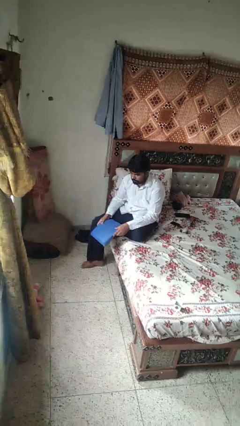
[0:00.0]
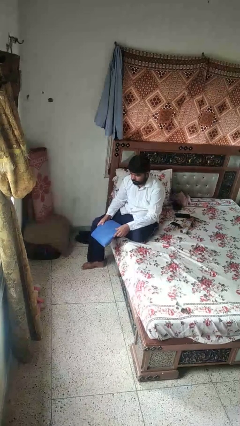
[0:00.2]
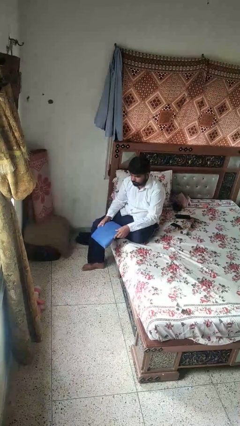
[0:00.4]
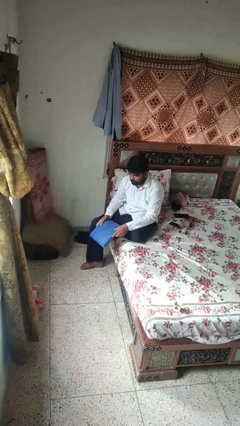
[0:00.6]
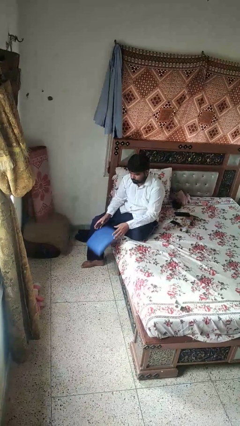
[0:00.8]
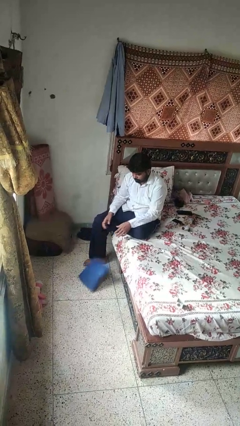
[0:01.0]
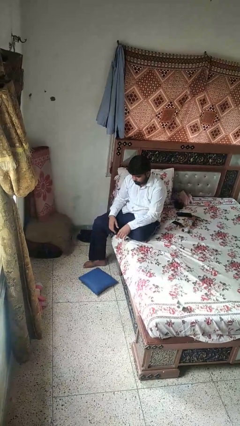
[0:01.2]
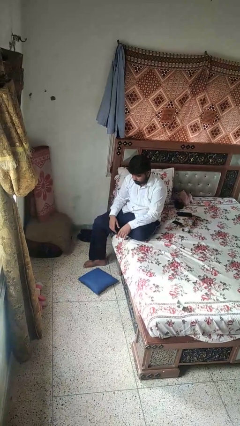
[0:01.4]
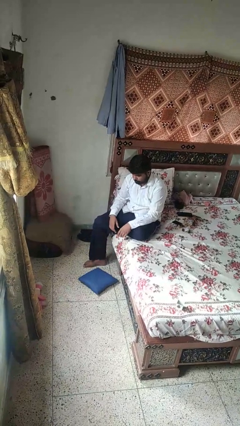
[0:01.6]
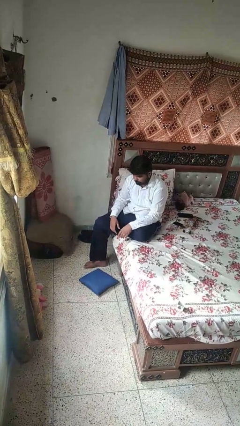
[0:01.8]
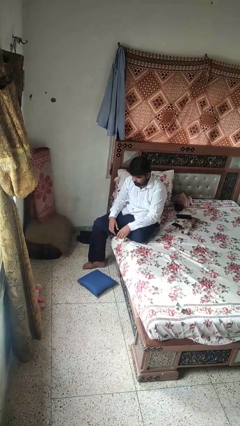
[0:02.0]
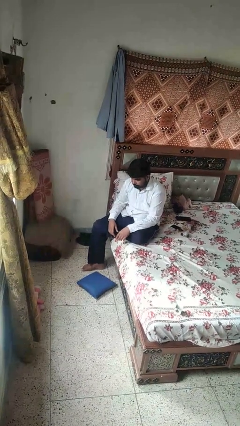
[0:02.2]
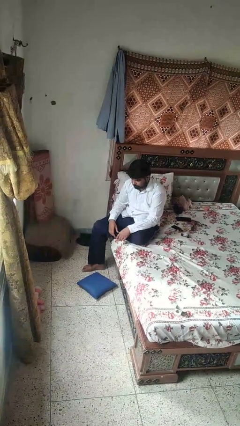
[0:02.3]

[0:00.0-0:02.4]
person drops object

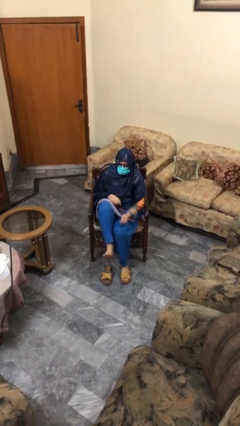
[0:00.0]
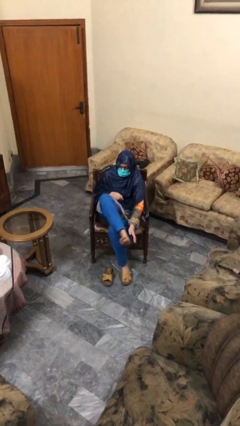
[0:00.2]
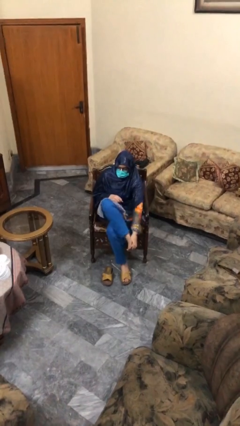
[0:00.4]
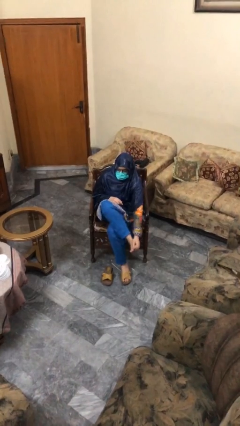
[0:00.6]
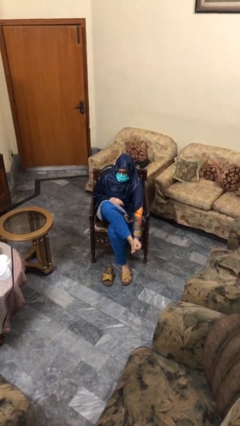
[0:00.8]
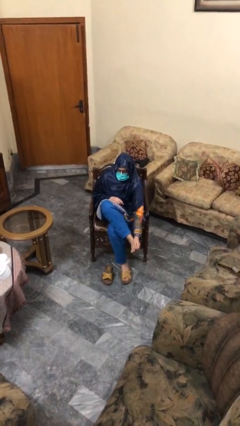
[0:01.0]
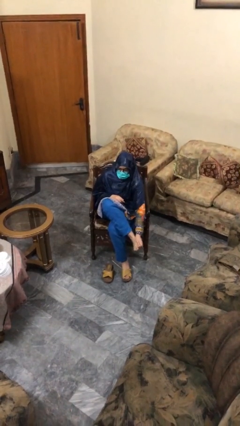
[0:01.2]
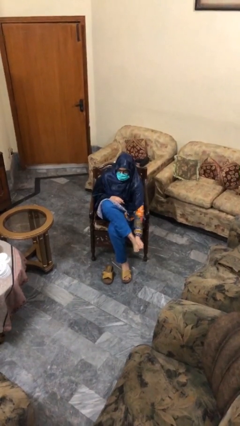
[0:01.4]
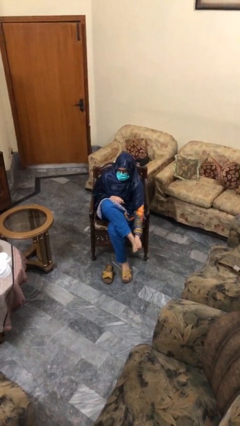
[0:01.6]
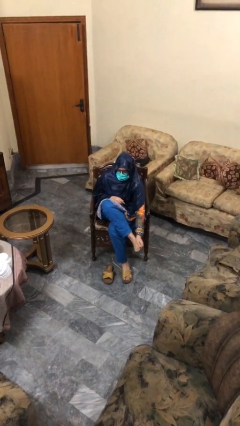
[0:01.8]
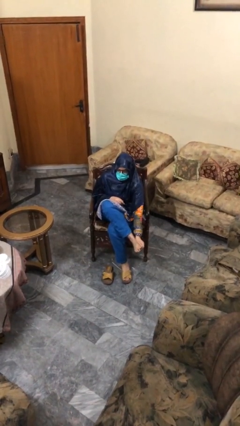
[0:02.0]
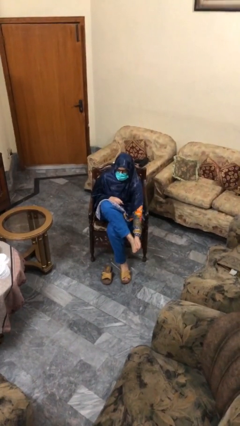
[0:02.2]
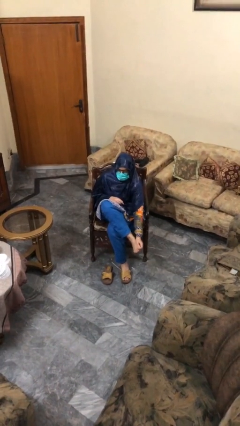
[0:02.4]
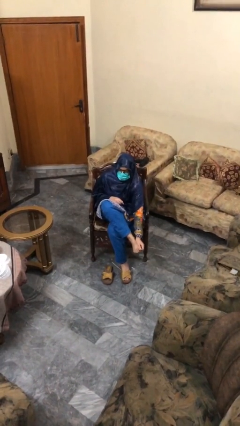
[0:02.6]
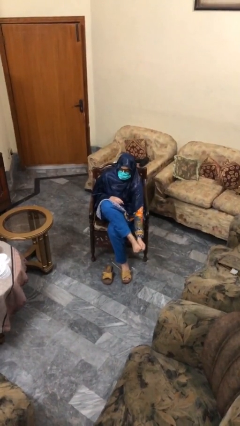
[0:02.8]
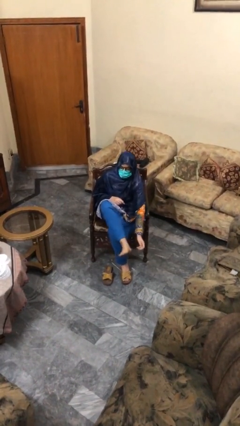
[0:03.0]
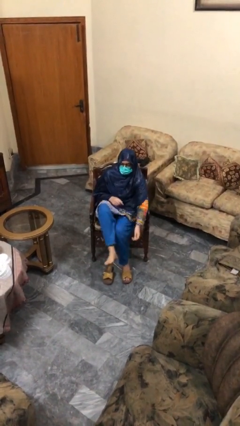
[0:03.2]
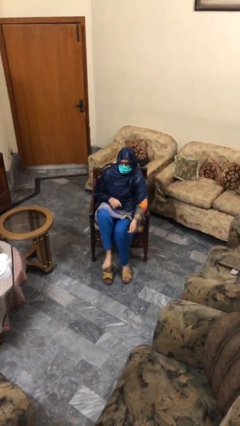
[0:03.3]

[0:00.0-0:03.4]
person rubs foot

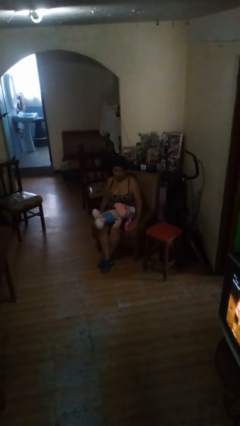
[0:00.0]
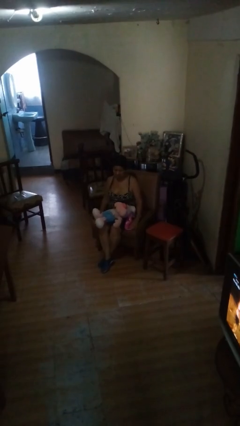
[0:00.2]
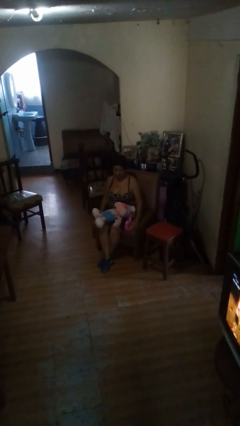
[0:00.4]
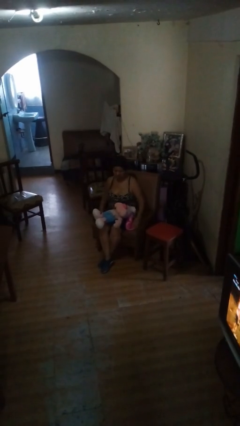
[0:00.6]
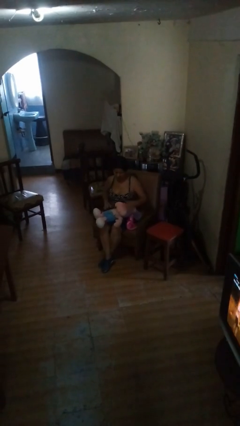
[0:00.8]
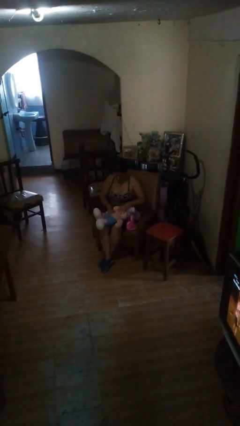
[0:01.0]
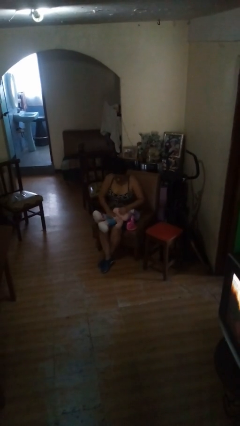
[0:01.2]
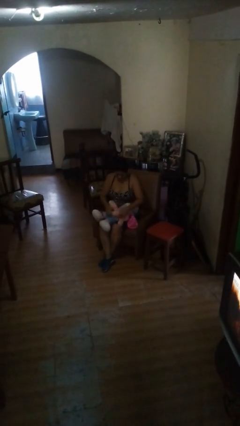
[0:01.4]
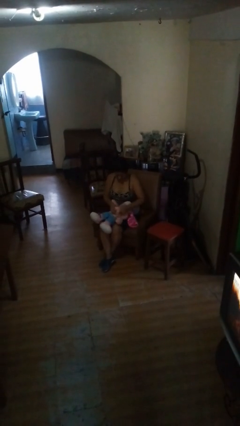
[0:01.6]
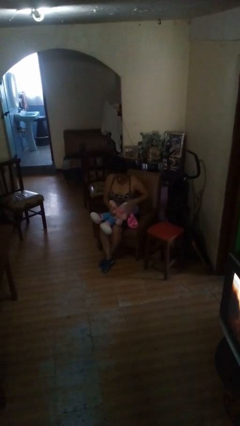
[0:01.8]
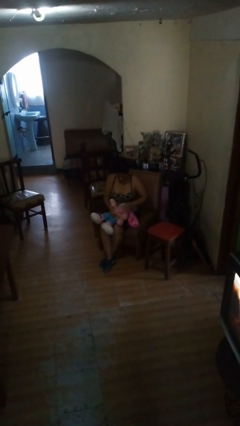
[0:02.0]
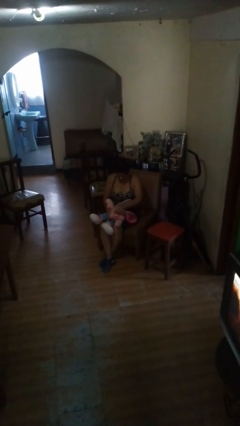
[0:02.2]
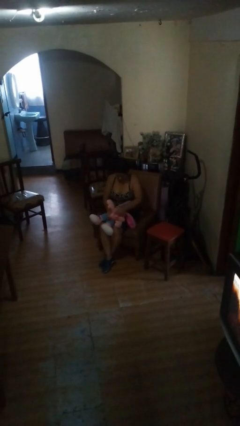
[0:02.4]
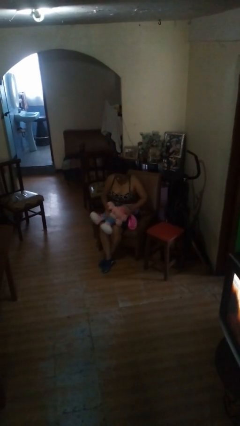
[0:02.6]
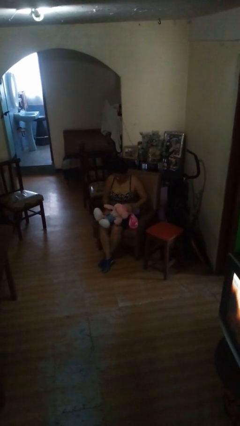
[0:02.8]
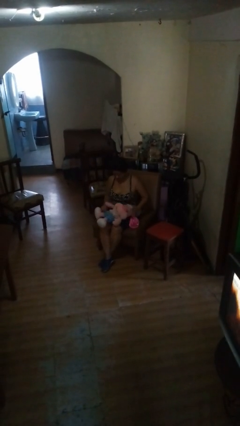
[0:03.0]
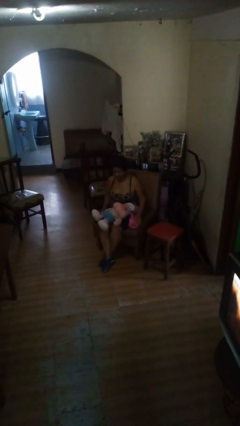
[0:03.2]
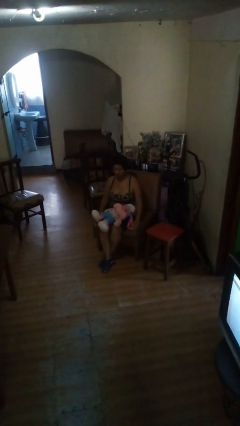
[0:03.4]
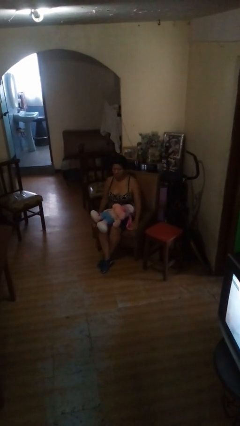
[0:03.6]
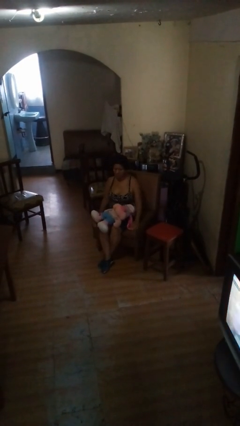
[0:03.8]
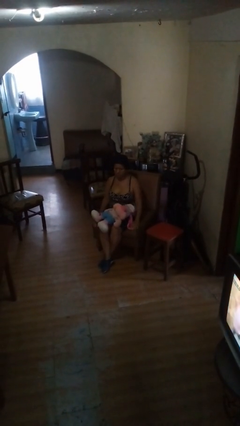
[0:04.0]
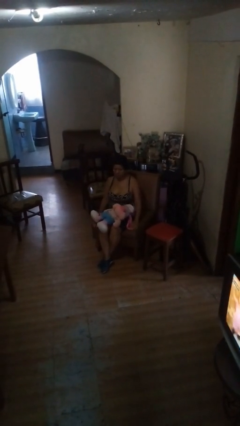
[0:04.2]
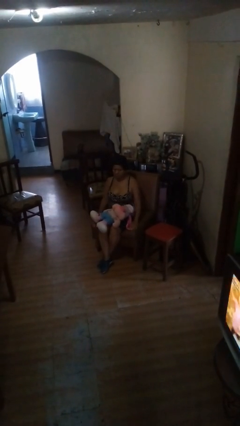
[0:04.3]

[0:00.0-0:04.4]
person squeezes object

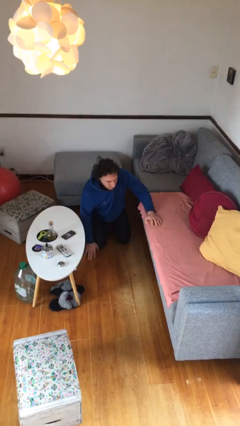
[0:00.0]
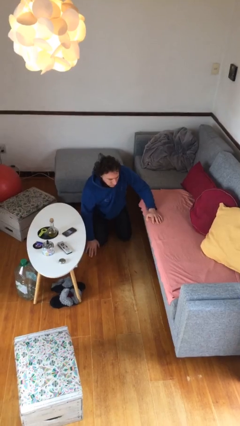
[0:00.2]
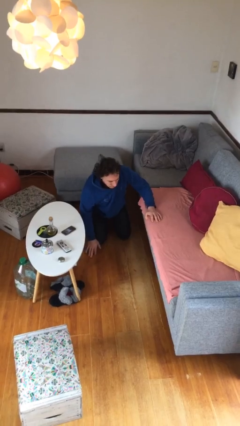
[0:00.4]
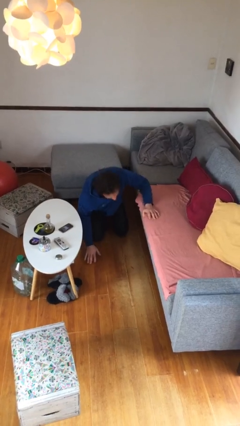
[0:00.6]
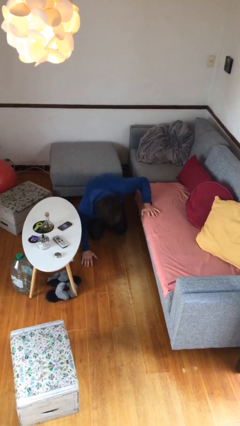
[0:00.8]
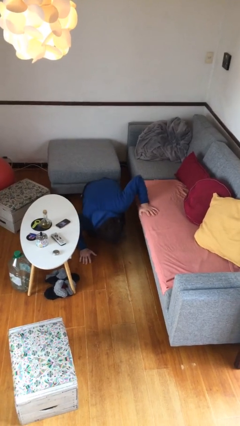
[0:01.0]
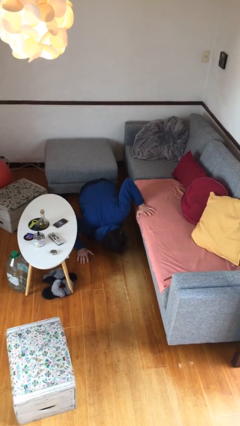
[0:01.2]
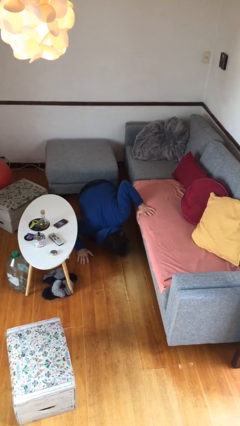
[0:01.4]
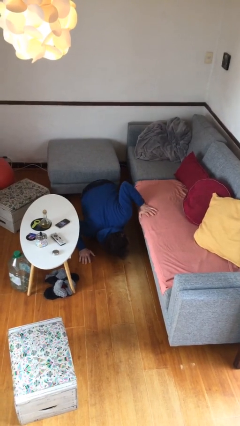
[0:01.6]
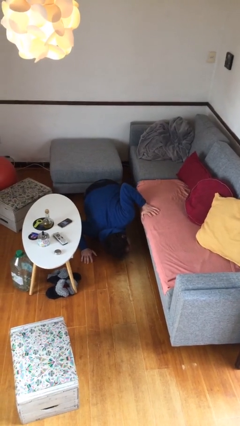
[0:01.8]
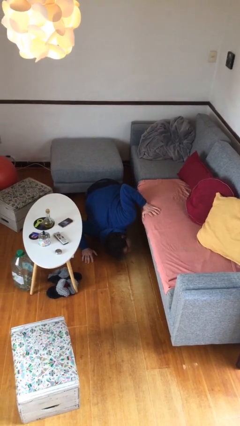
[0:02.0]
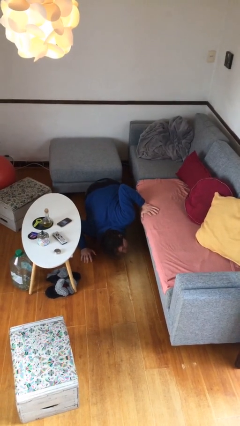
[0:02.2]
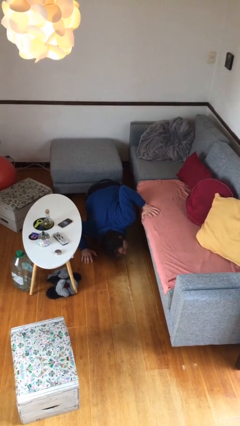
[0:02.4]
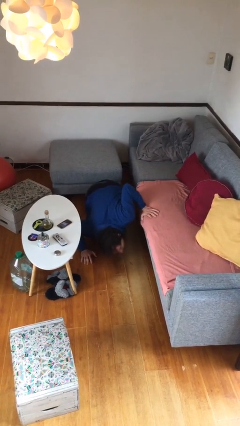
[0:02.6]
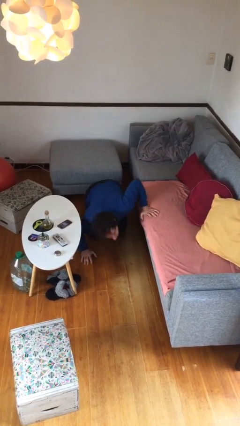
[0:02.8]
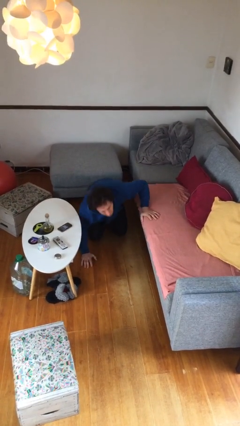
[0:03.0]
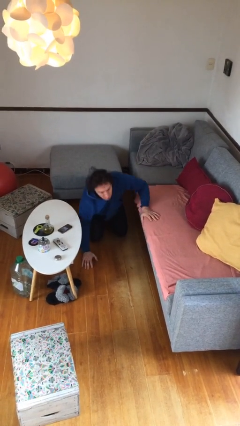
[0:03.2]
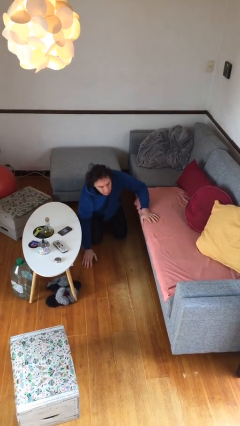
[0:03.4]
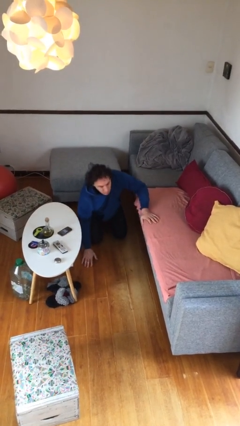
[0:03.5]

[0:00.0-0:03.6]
person searches under couch

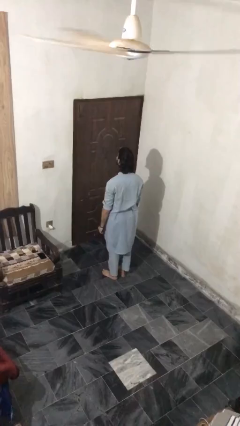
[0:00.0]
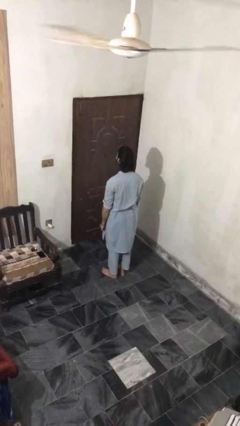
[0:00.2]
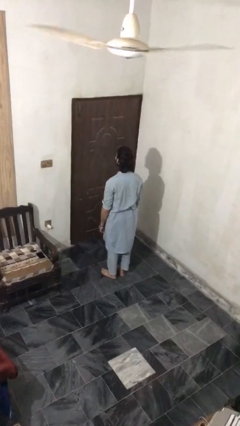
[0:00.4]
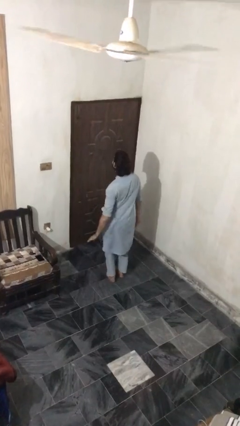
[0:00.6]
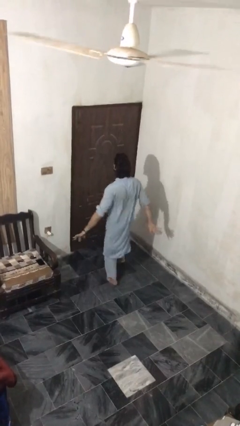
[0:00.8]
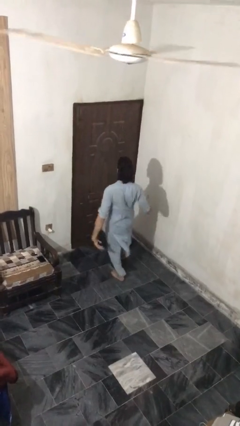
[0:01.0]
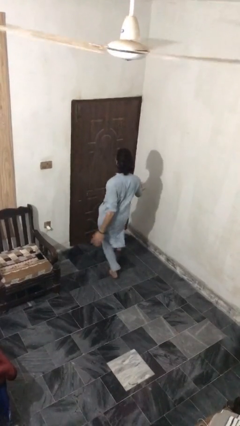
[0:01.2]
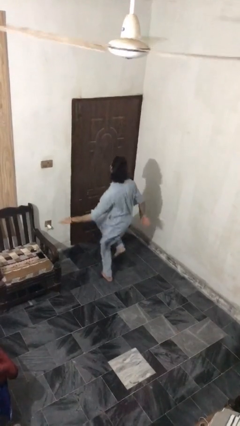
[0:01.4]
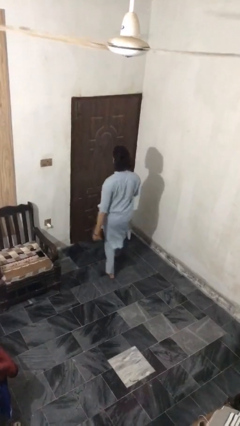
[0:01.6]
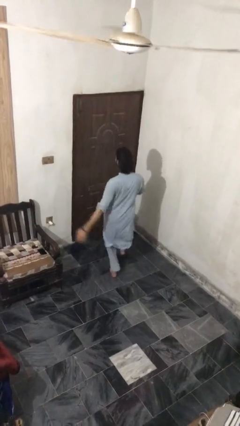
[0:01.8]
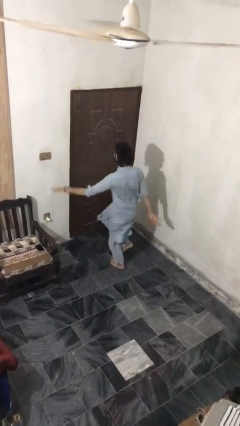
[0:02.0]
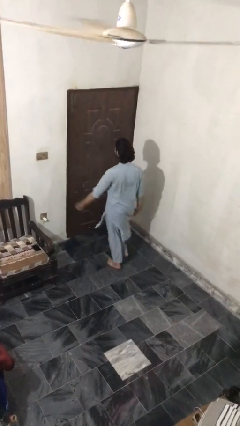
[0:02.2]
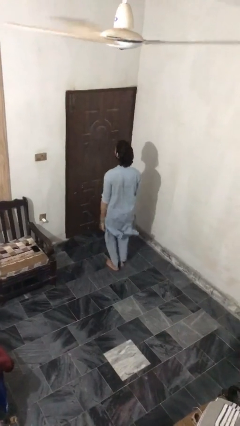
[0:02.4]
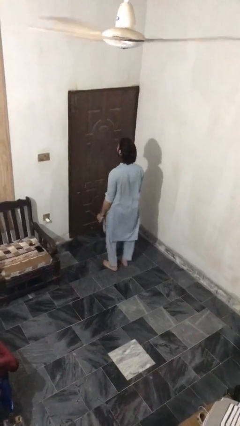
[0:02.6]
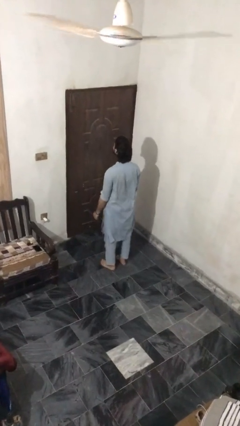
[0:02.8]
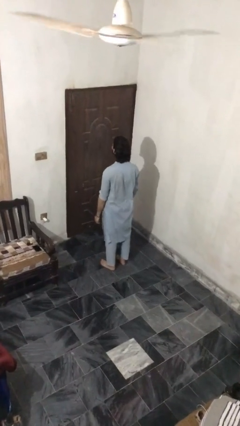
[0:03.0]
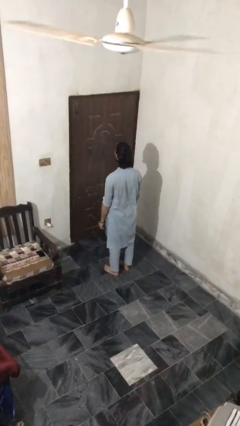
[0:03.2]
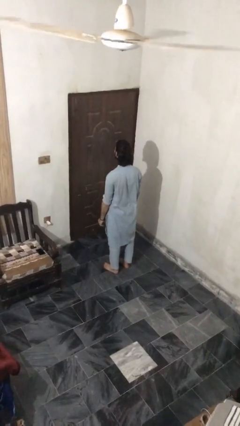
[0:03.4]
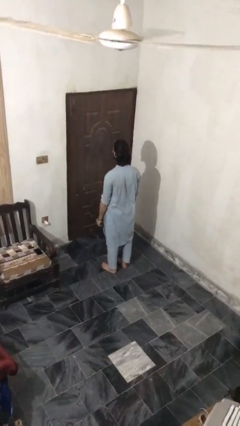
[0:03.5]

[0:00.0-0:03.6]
person dances in place

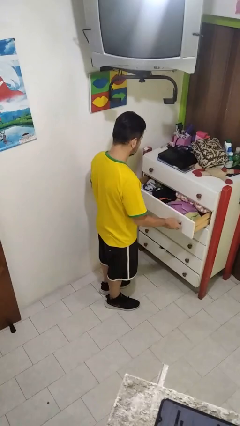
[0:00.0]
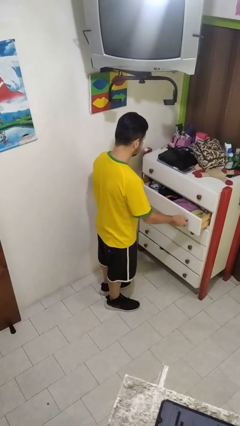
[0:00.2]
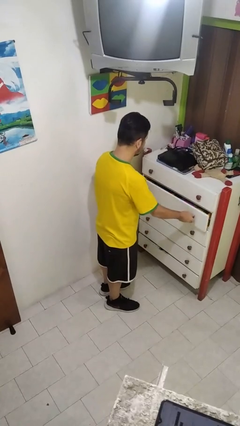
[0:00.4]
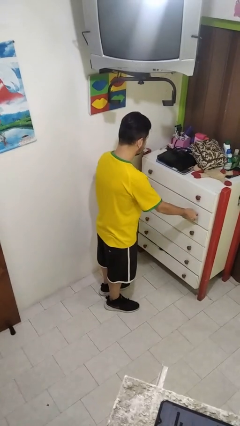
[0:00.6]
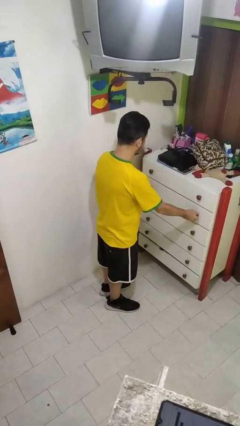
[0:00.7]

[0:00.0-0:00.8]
person closes dresser drawer
